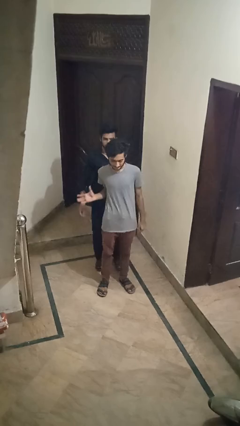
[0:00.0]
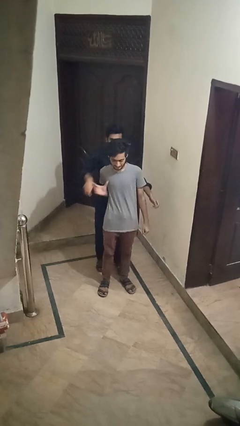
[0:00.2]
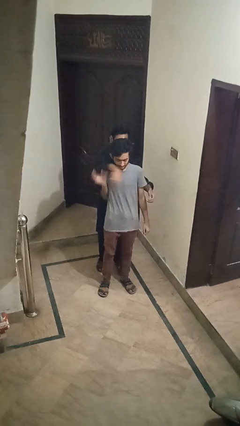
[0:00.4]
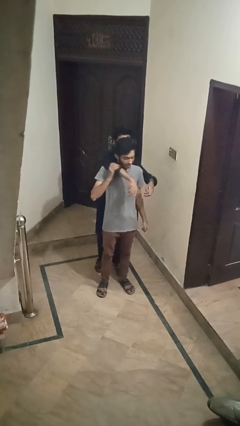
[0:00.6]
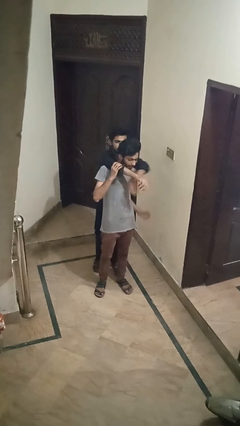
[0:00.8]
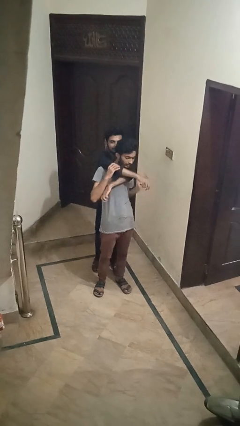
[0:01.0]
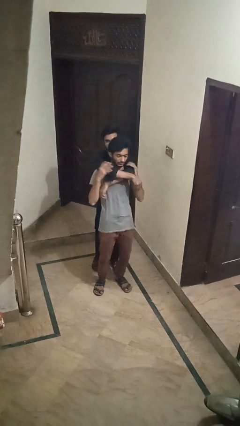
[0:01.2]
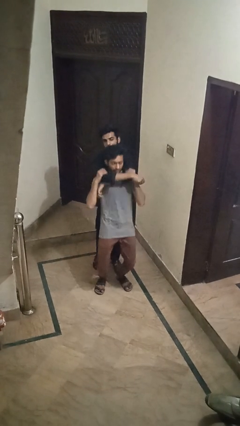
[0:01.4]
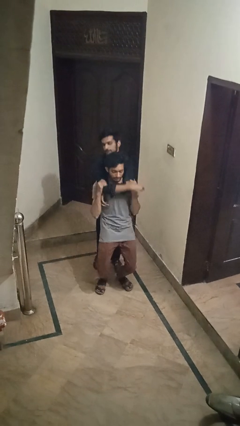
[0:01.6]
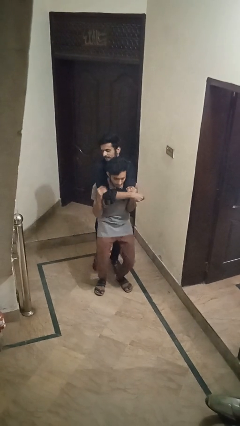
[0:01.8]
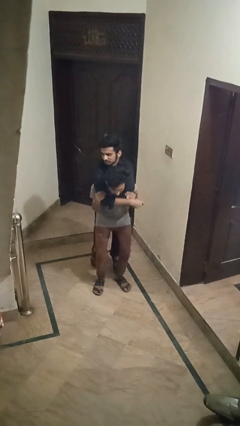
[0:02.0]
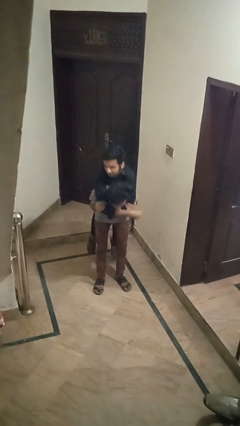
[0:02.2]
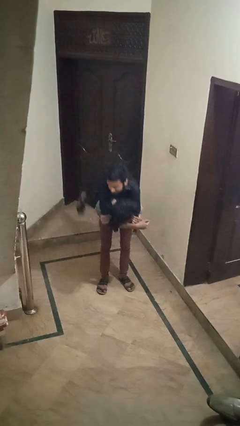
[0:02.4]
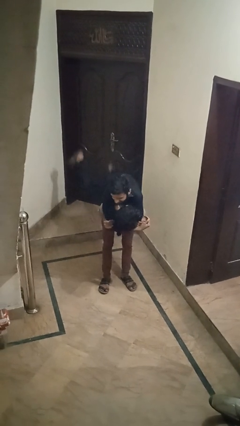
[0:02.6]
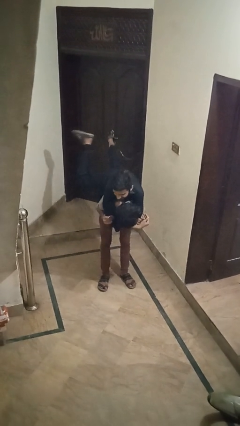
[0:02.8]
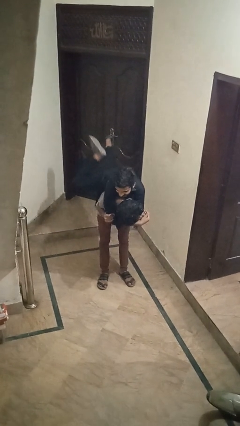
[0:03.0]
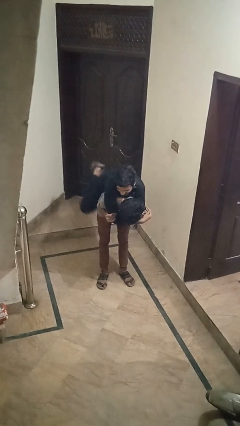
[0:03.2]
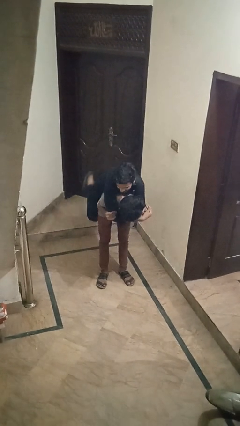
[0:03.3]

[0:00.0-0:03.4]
person carries person over shoulder

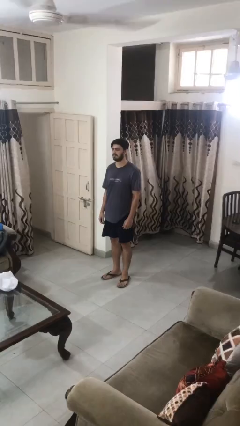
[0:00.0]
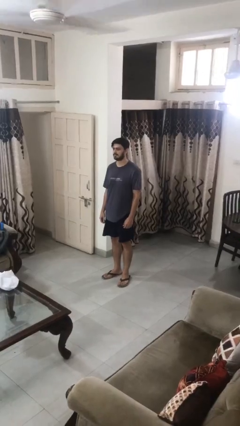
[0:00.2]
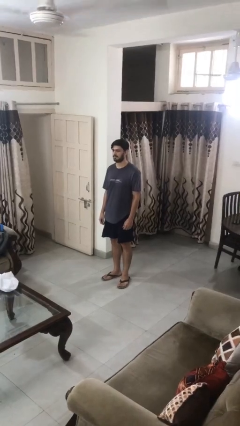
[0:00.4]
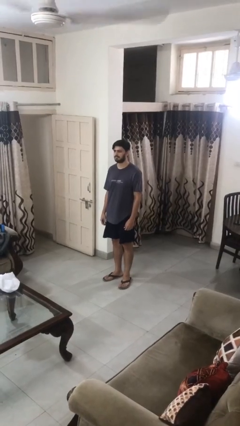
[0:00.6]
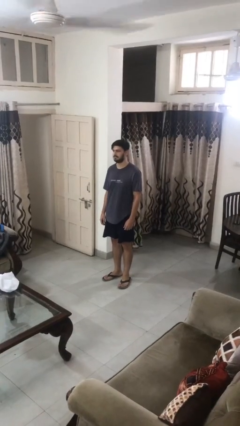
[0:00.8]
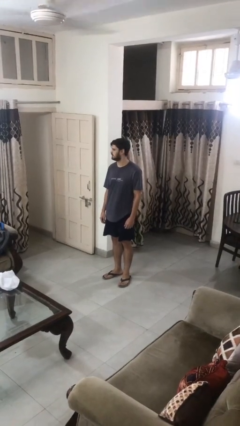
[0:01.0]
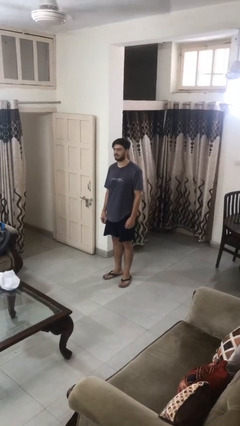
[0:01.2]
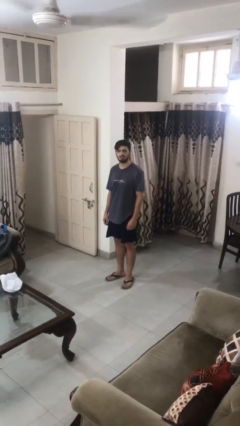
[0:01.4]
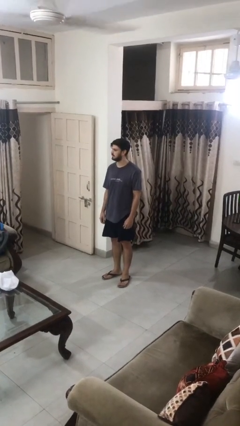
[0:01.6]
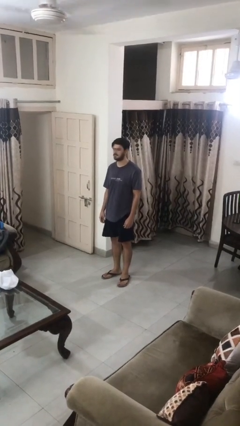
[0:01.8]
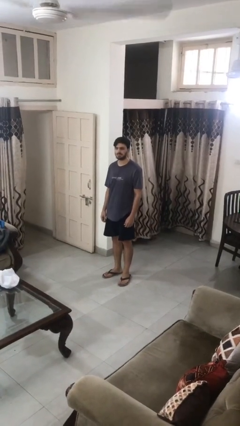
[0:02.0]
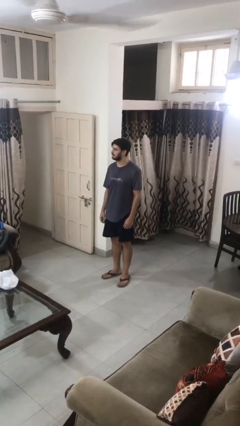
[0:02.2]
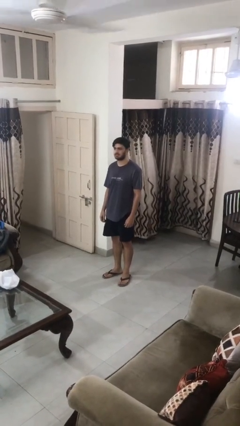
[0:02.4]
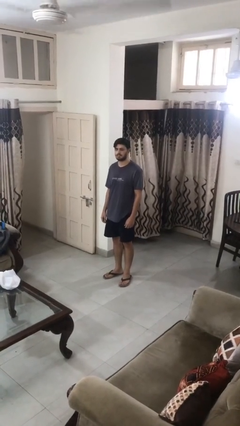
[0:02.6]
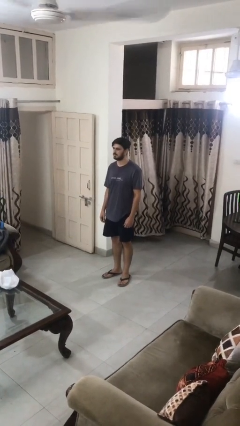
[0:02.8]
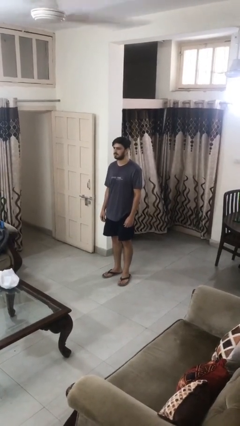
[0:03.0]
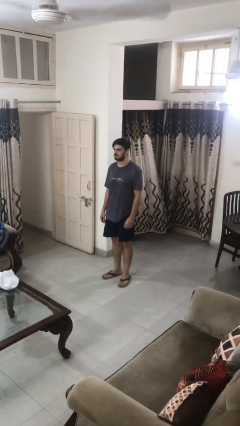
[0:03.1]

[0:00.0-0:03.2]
person shakes head

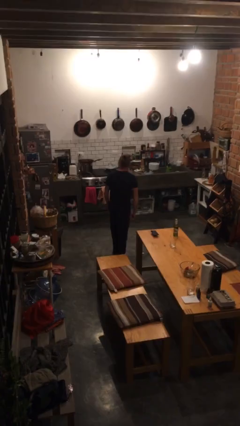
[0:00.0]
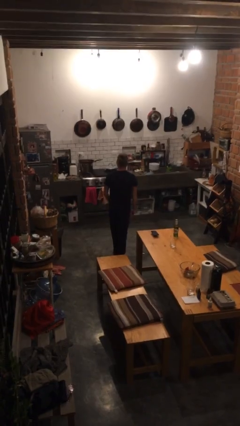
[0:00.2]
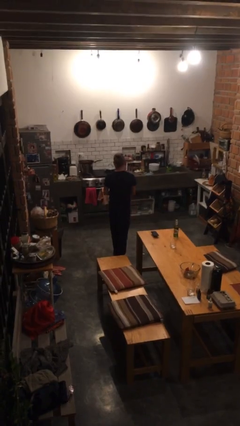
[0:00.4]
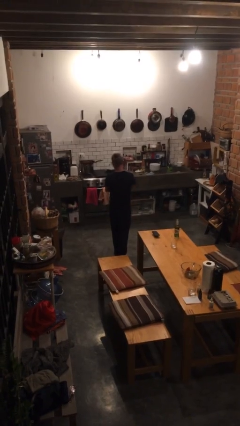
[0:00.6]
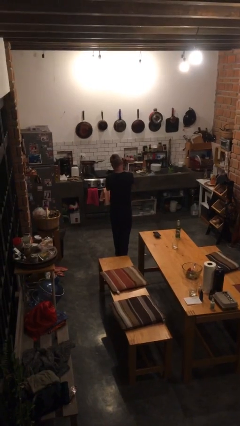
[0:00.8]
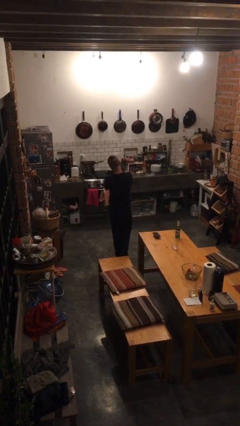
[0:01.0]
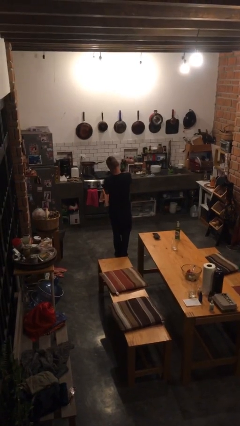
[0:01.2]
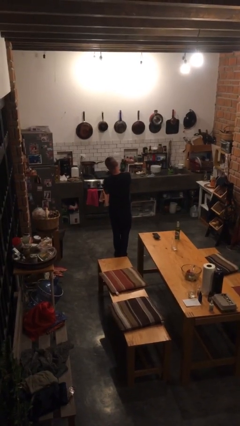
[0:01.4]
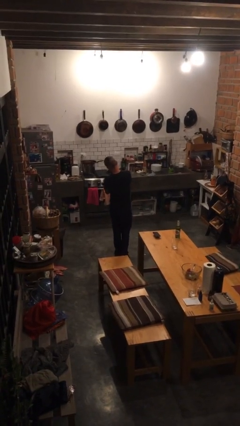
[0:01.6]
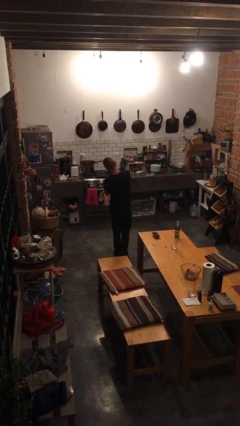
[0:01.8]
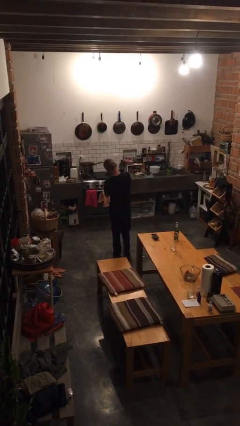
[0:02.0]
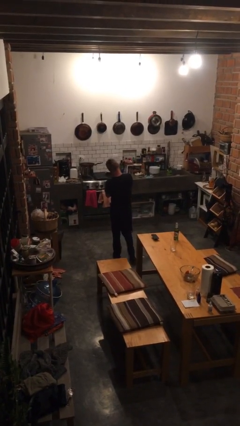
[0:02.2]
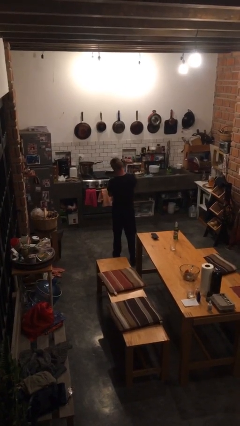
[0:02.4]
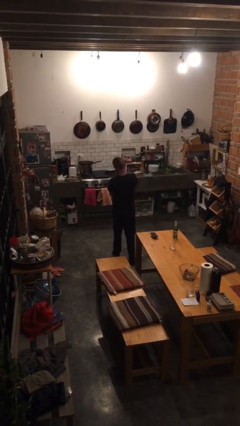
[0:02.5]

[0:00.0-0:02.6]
person gestures arms x

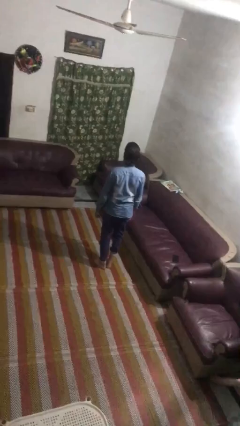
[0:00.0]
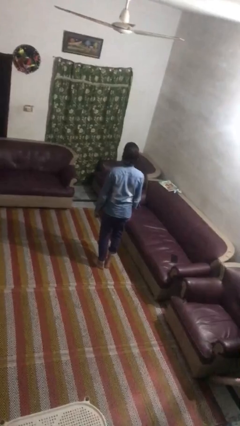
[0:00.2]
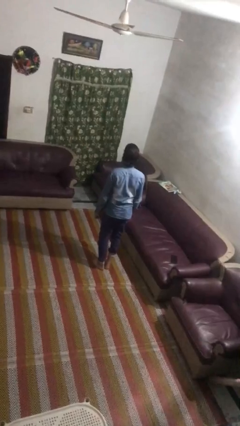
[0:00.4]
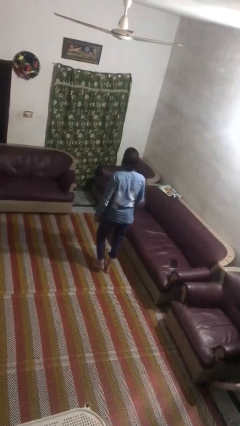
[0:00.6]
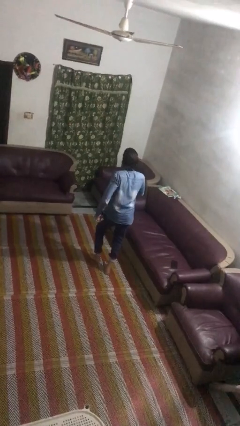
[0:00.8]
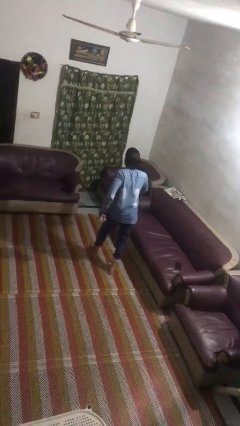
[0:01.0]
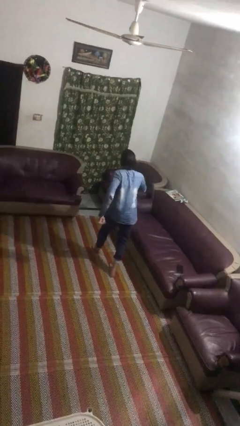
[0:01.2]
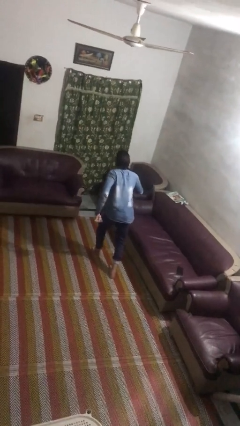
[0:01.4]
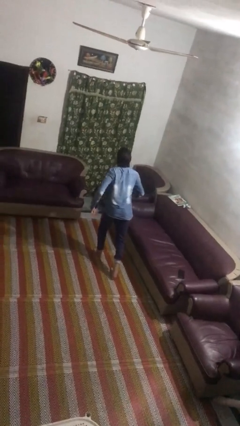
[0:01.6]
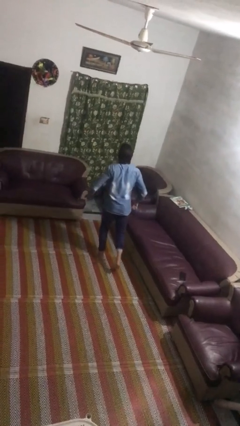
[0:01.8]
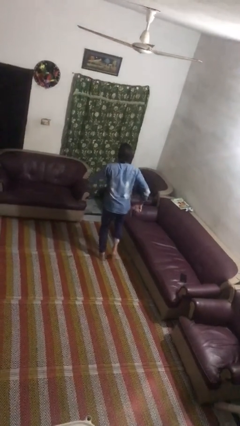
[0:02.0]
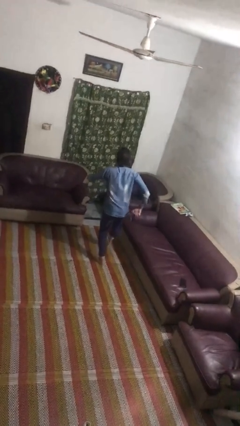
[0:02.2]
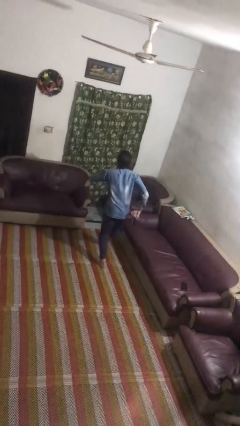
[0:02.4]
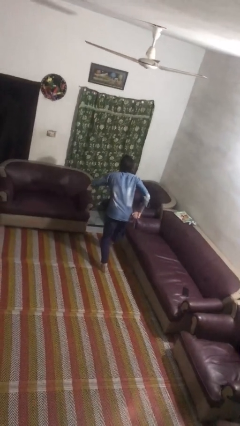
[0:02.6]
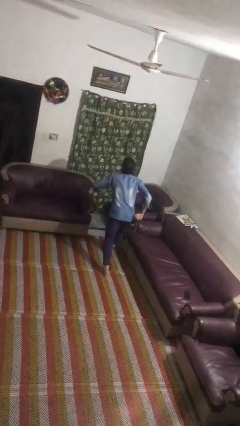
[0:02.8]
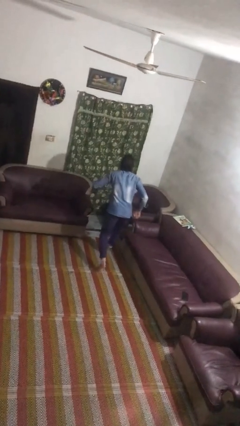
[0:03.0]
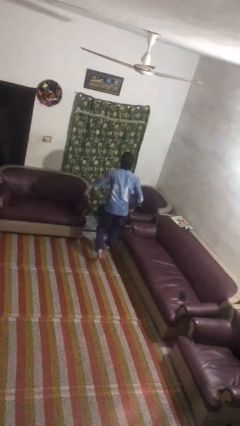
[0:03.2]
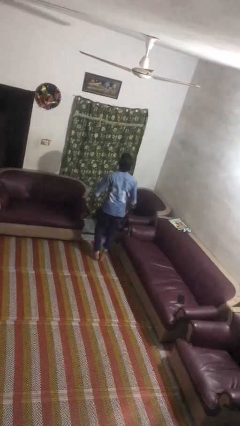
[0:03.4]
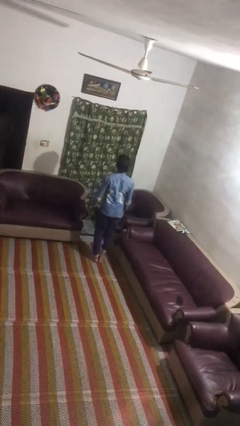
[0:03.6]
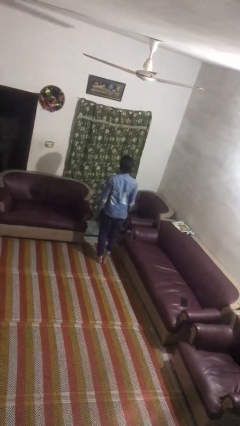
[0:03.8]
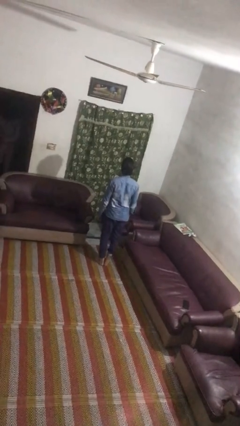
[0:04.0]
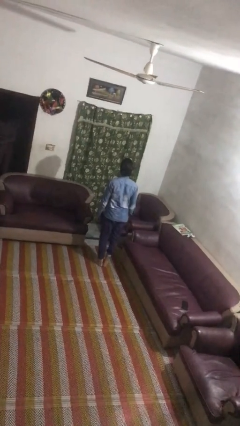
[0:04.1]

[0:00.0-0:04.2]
person walks tiptoe

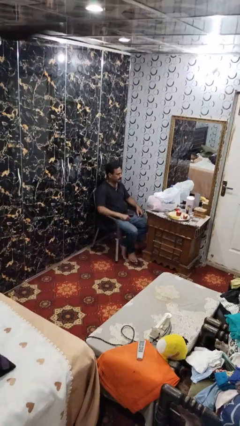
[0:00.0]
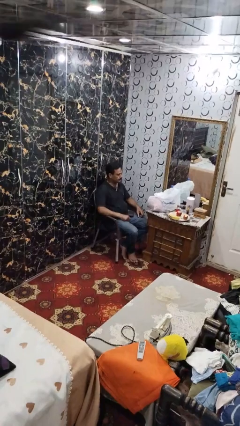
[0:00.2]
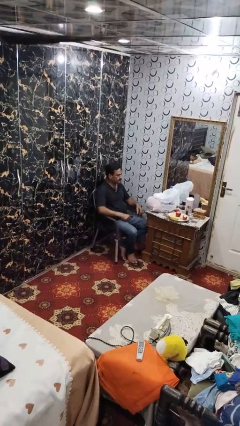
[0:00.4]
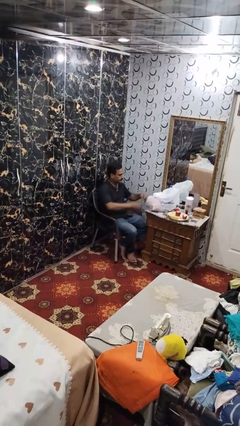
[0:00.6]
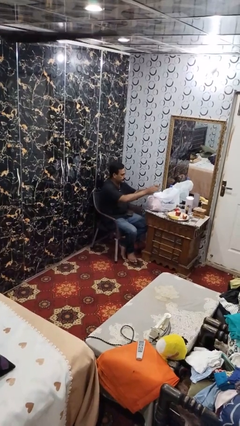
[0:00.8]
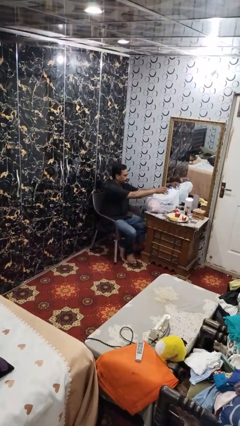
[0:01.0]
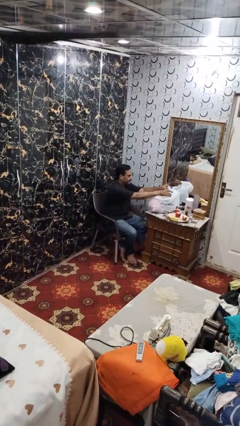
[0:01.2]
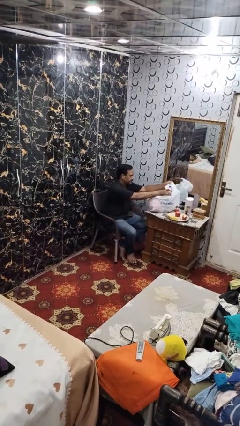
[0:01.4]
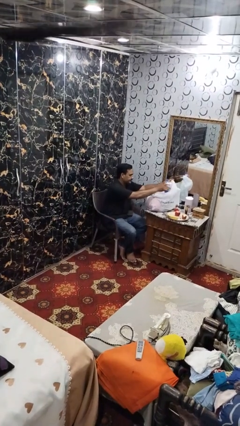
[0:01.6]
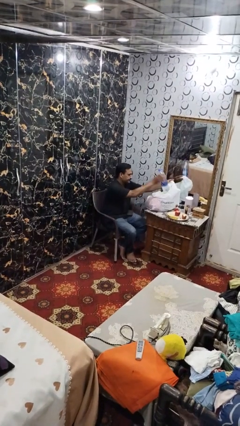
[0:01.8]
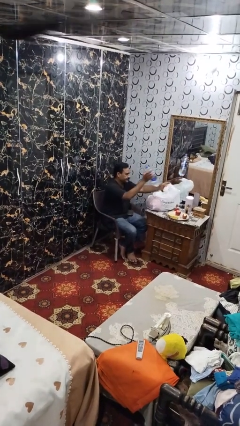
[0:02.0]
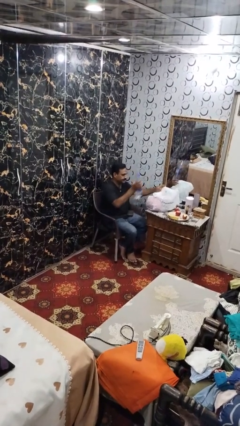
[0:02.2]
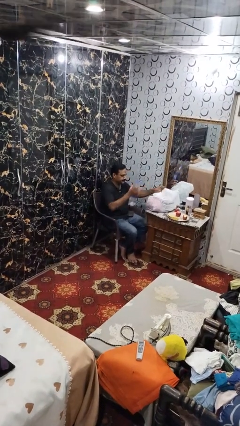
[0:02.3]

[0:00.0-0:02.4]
person takes object from bag

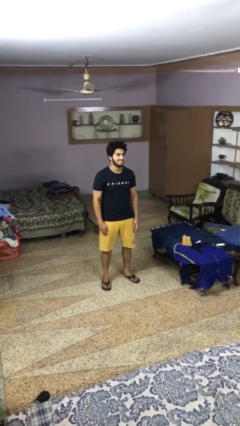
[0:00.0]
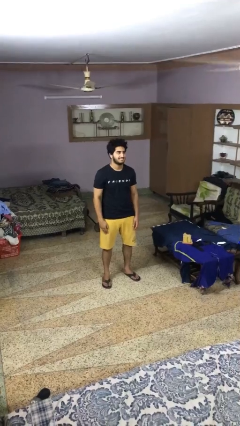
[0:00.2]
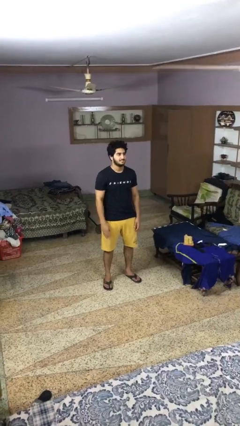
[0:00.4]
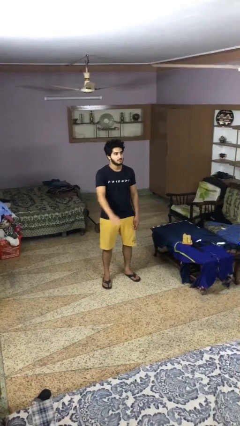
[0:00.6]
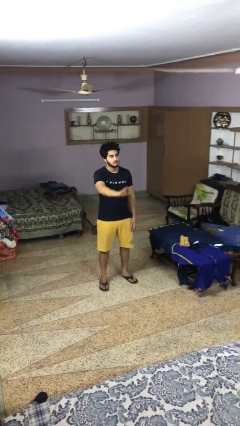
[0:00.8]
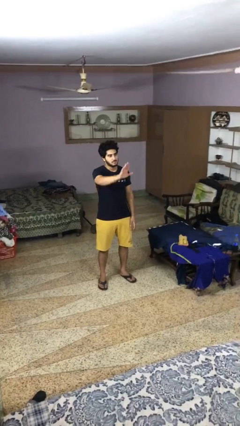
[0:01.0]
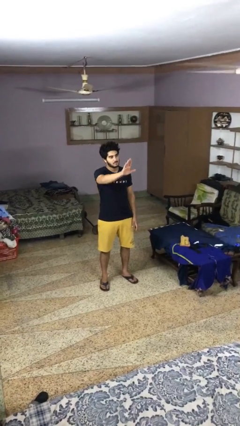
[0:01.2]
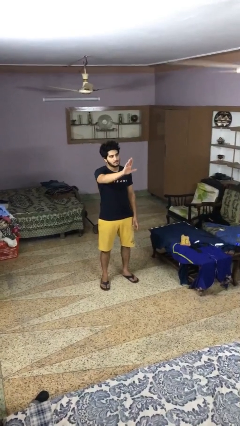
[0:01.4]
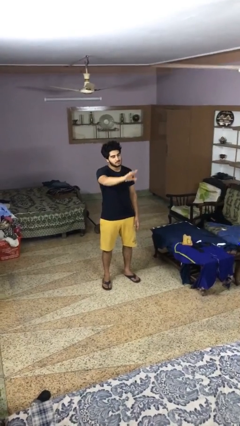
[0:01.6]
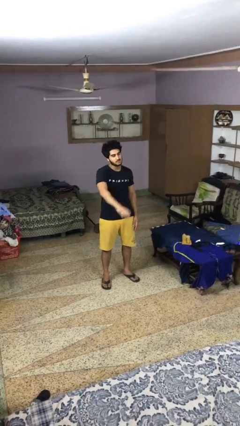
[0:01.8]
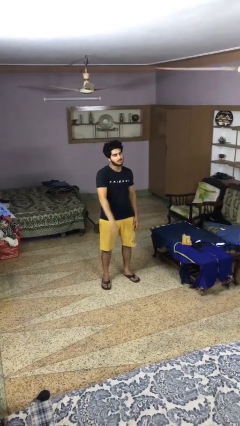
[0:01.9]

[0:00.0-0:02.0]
person gestures stop
